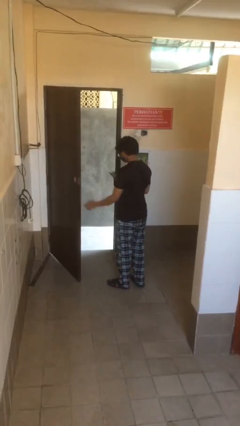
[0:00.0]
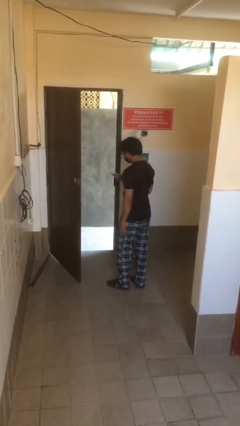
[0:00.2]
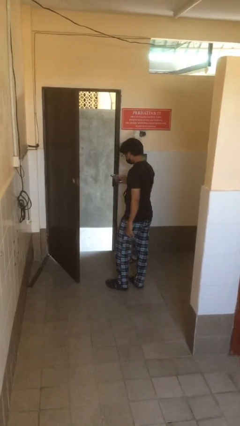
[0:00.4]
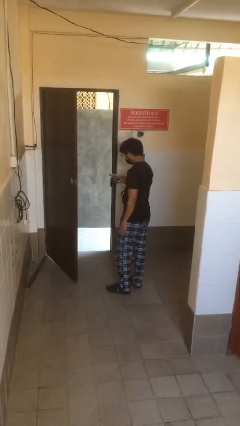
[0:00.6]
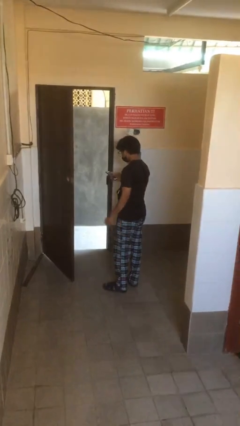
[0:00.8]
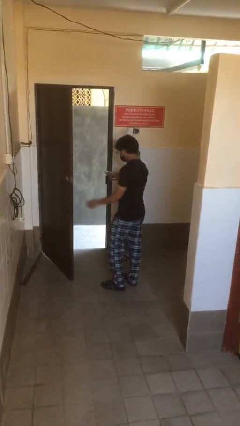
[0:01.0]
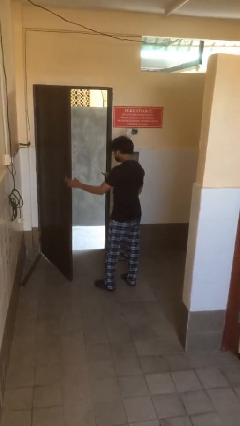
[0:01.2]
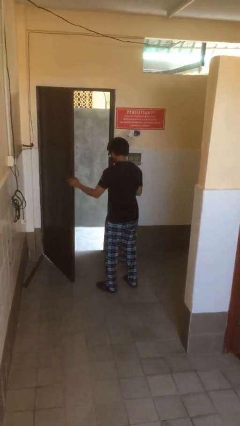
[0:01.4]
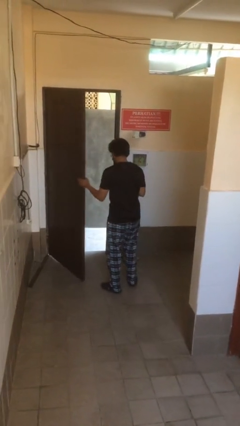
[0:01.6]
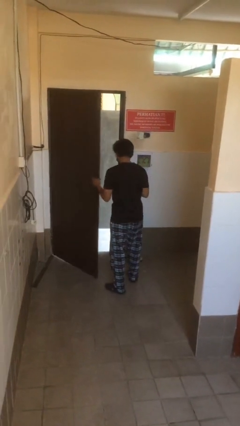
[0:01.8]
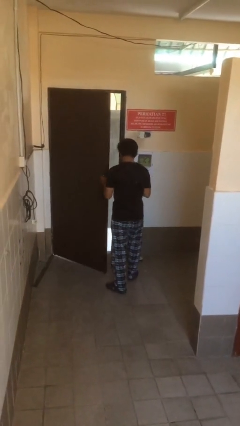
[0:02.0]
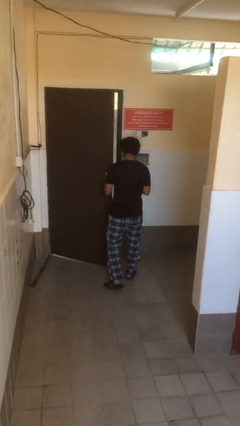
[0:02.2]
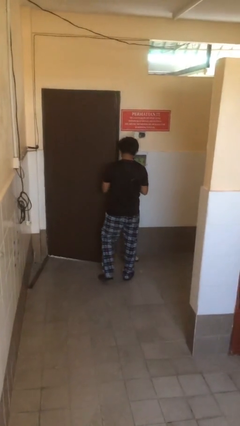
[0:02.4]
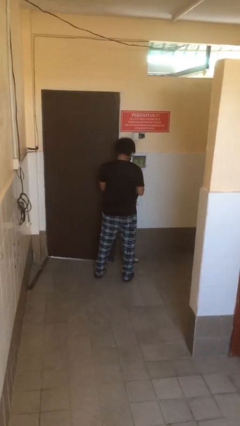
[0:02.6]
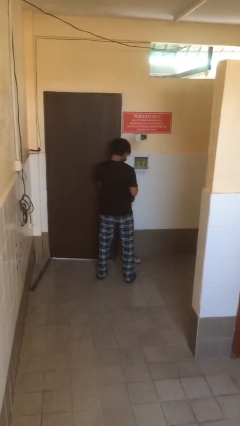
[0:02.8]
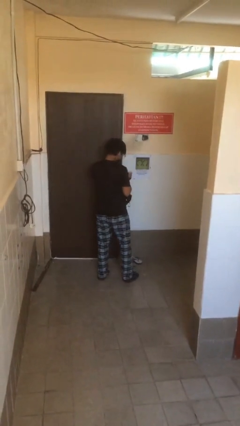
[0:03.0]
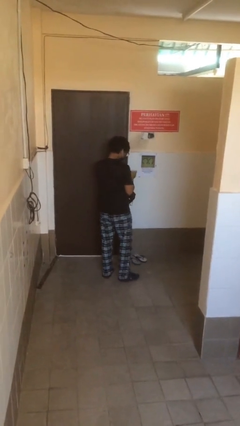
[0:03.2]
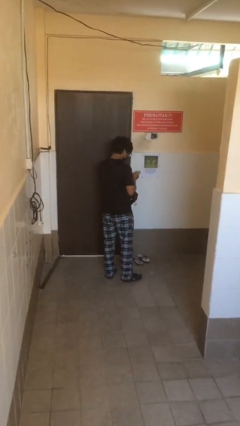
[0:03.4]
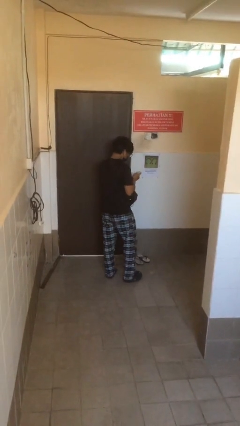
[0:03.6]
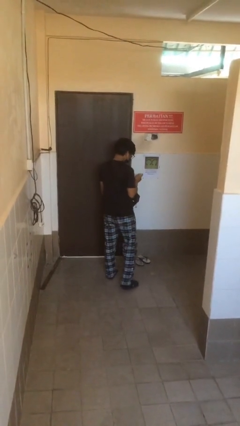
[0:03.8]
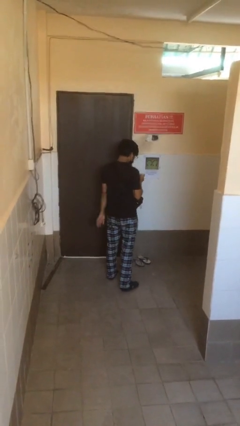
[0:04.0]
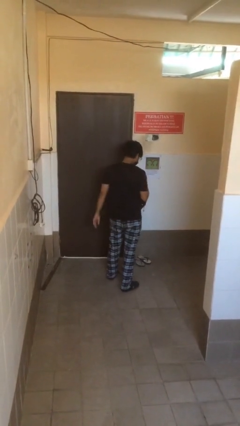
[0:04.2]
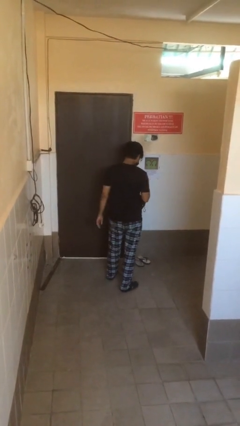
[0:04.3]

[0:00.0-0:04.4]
person closes facility door

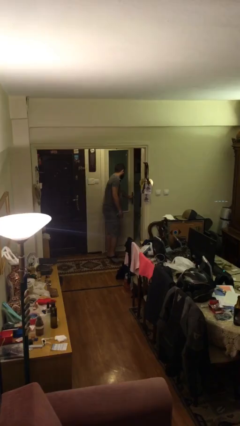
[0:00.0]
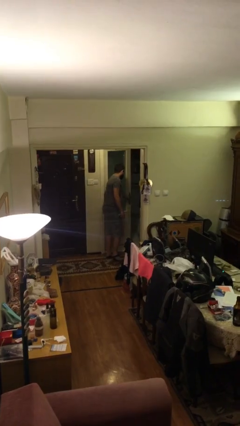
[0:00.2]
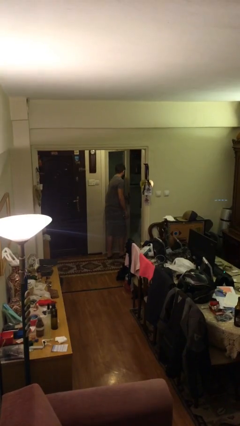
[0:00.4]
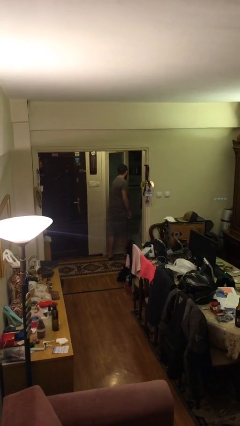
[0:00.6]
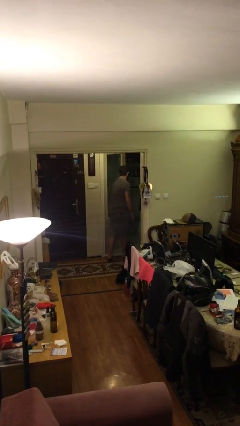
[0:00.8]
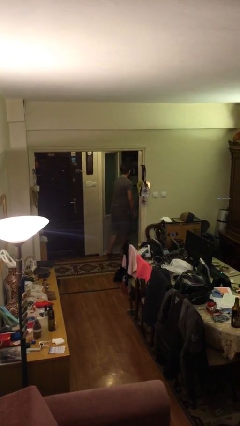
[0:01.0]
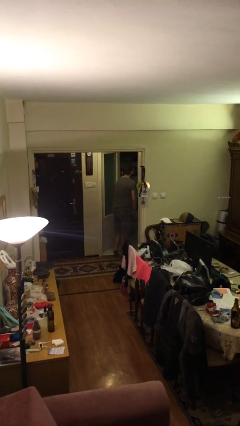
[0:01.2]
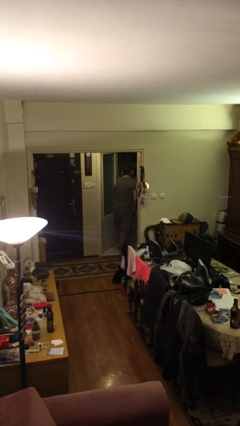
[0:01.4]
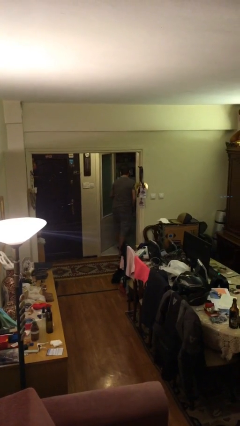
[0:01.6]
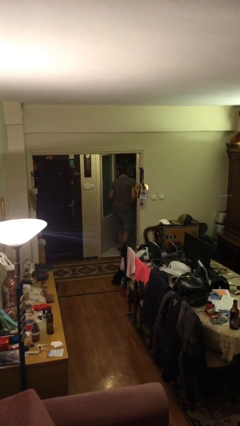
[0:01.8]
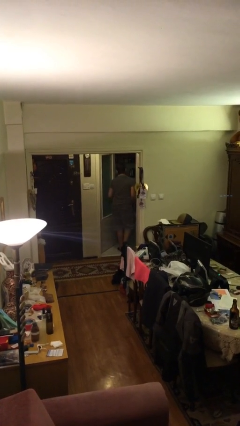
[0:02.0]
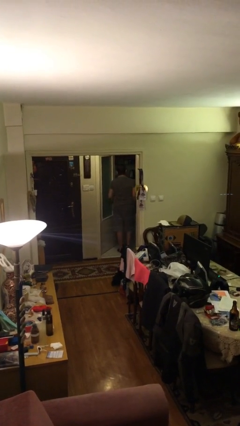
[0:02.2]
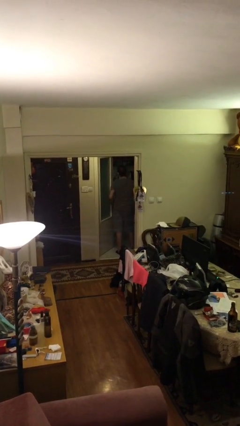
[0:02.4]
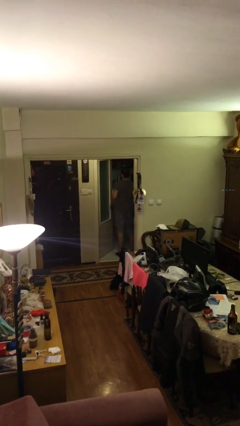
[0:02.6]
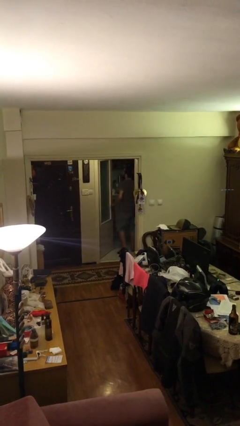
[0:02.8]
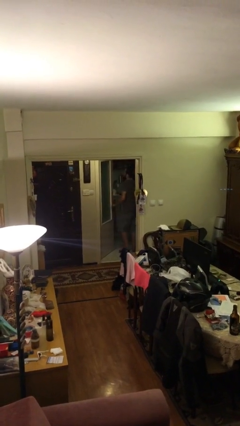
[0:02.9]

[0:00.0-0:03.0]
person exits scene through structure

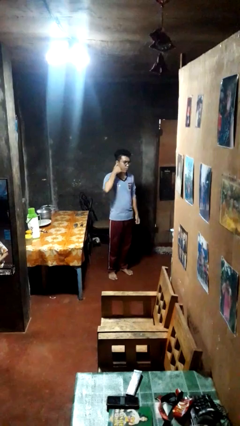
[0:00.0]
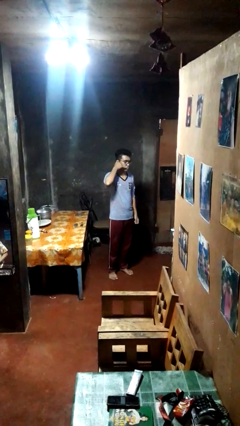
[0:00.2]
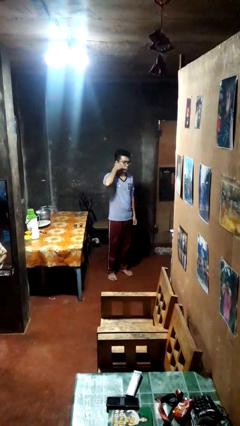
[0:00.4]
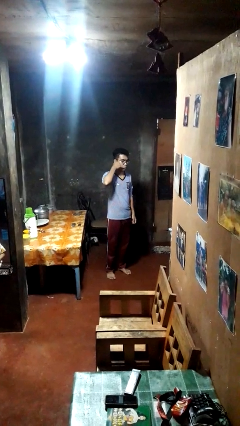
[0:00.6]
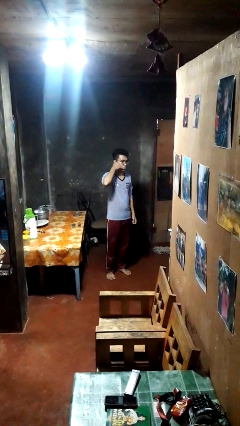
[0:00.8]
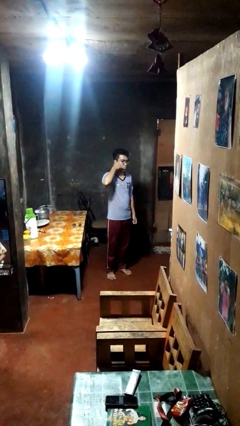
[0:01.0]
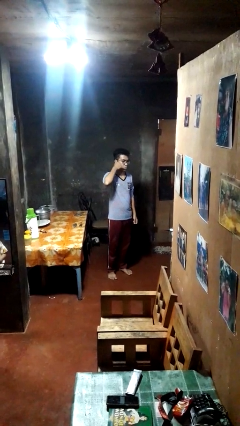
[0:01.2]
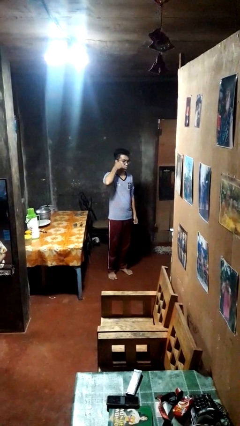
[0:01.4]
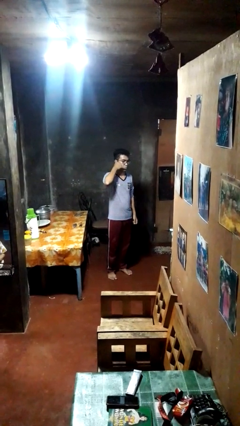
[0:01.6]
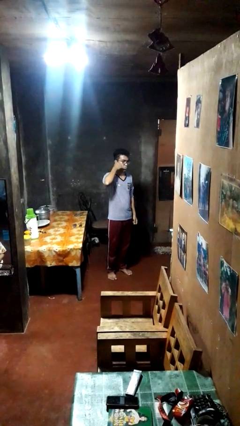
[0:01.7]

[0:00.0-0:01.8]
person gestures call me

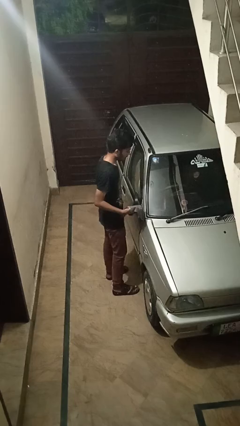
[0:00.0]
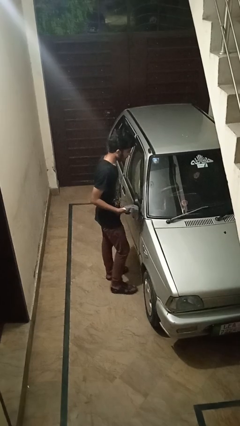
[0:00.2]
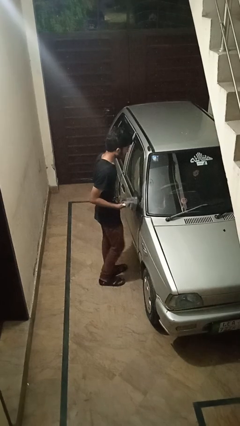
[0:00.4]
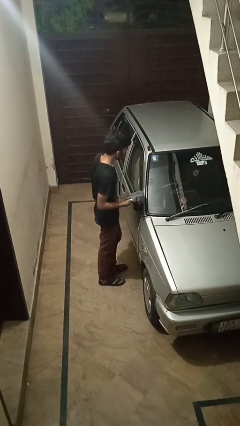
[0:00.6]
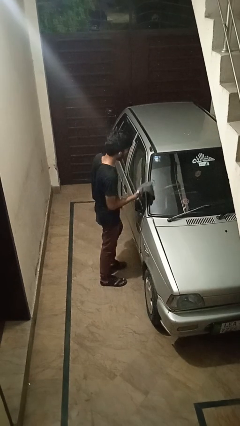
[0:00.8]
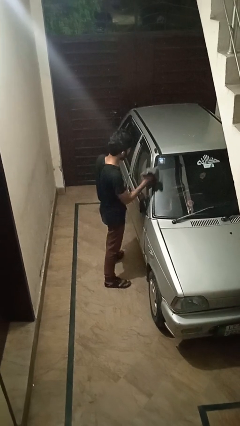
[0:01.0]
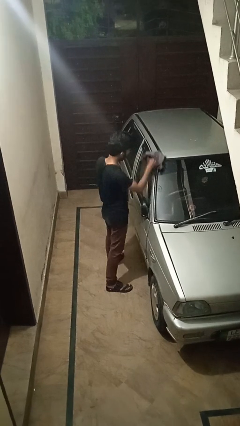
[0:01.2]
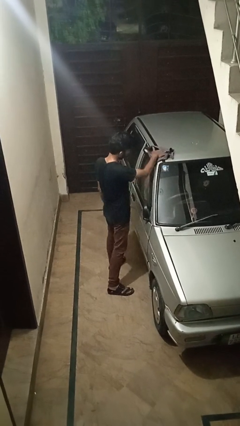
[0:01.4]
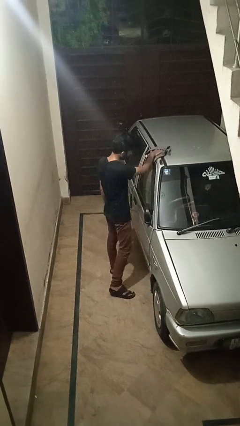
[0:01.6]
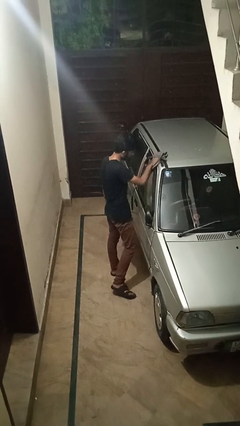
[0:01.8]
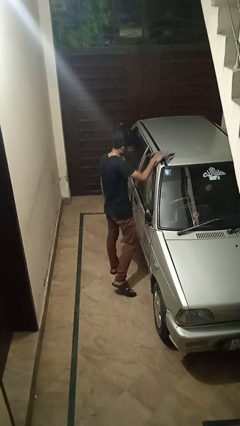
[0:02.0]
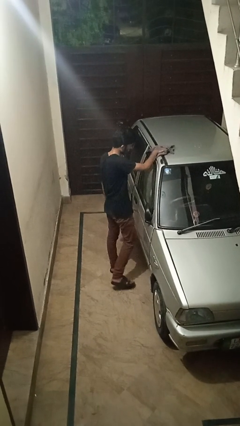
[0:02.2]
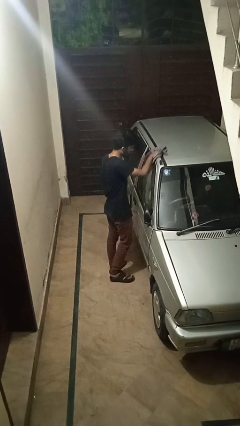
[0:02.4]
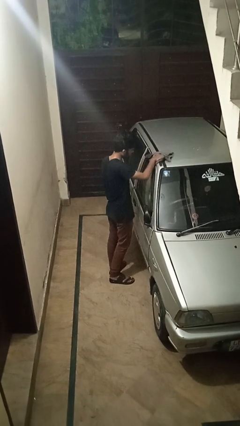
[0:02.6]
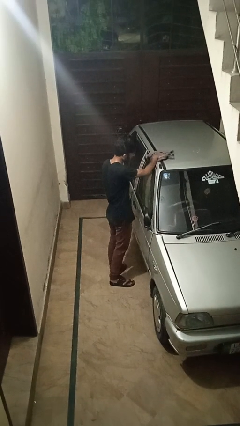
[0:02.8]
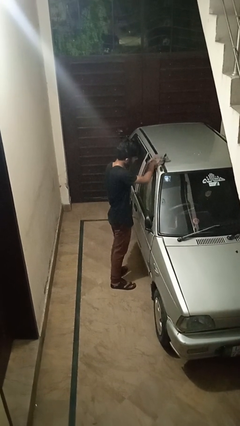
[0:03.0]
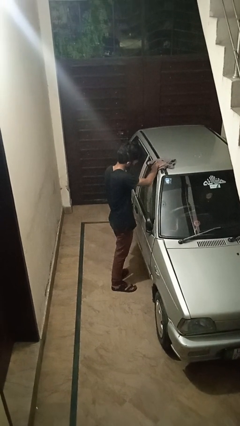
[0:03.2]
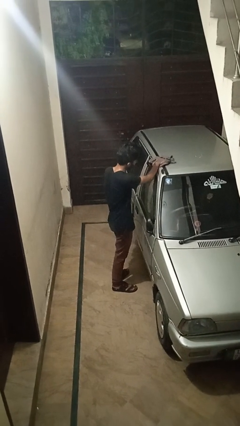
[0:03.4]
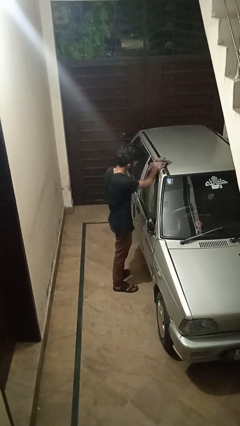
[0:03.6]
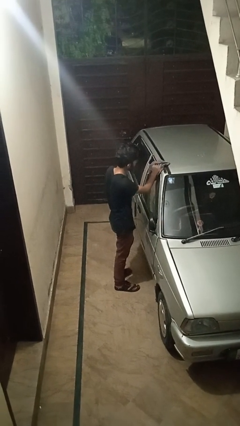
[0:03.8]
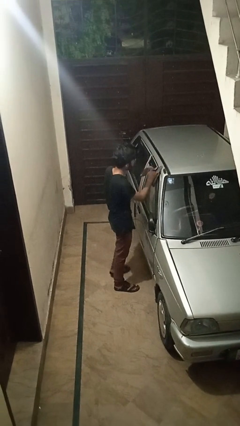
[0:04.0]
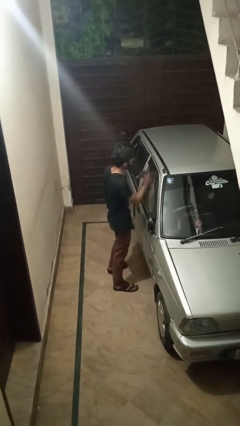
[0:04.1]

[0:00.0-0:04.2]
person polishes car with rag

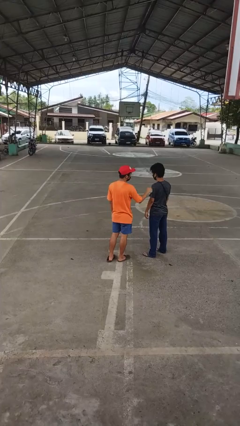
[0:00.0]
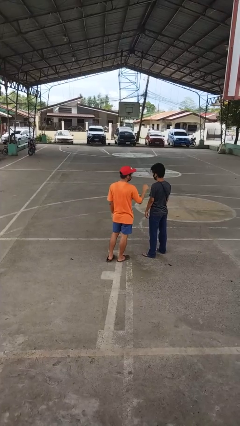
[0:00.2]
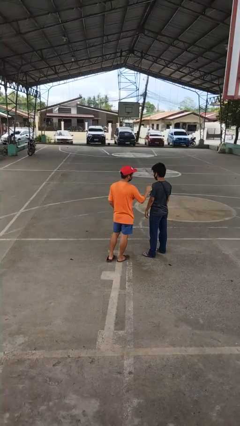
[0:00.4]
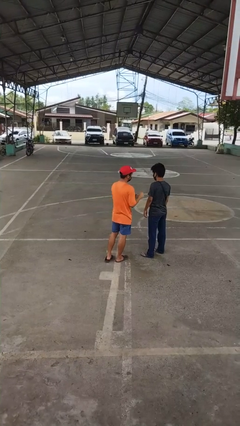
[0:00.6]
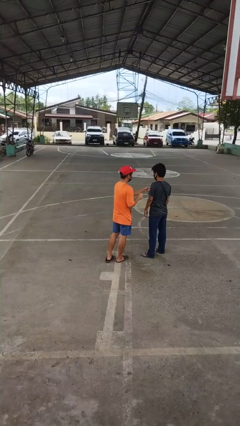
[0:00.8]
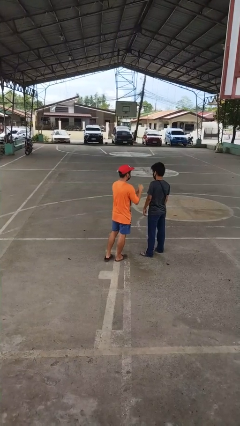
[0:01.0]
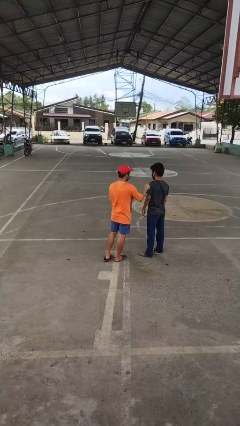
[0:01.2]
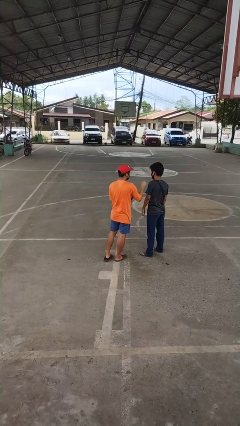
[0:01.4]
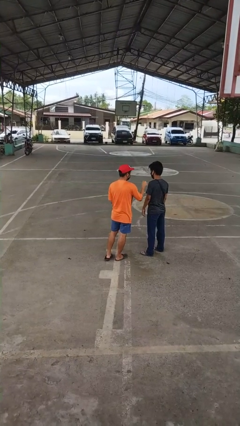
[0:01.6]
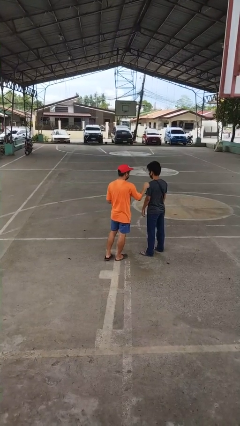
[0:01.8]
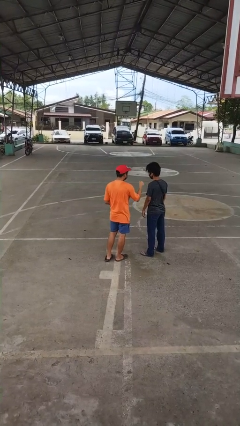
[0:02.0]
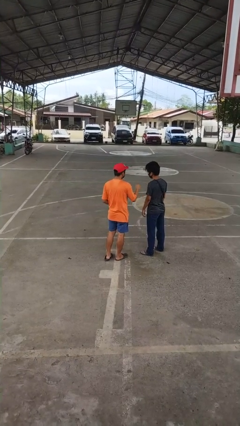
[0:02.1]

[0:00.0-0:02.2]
person pounds shoulders of person

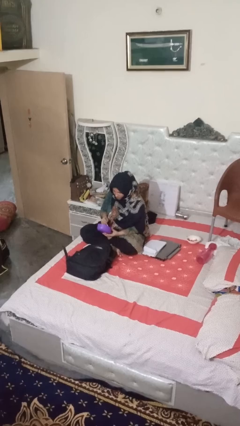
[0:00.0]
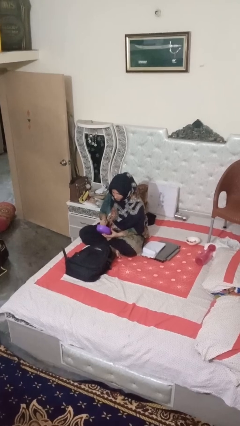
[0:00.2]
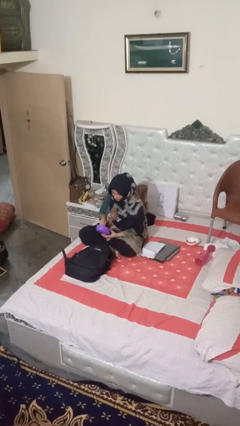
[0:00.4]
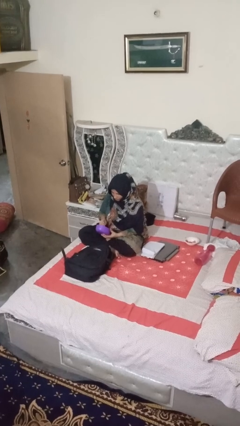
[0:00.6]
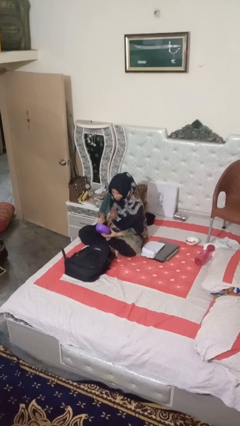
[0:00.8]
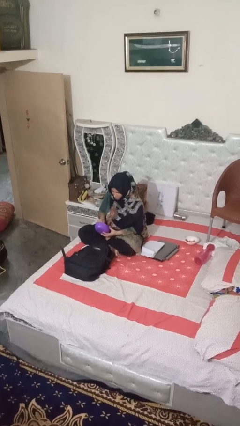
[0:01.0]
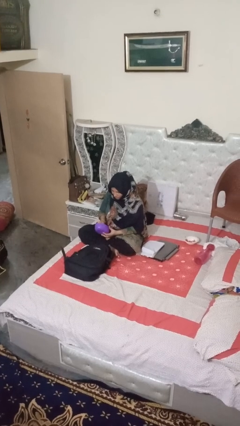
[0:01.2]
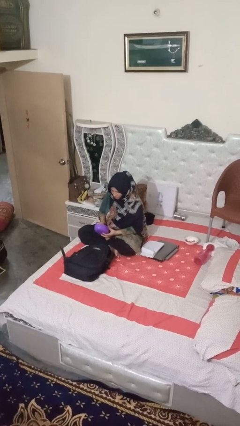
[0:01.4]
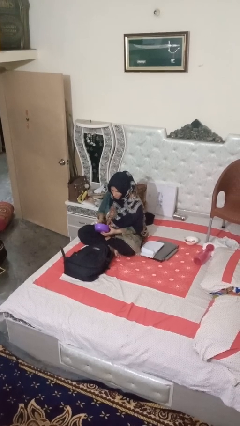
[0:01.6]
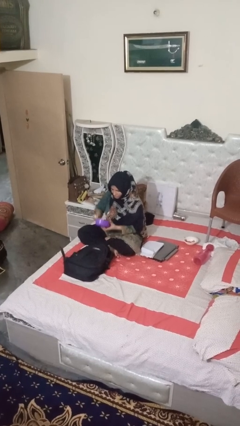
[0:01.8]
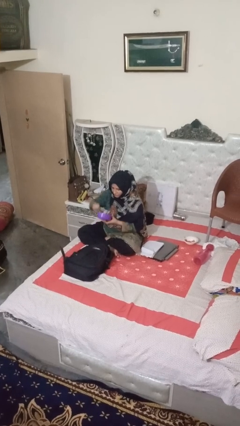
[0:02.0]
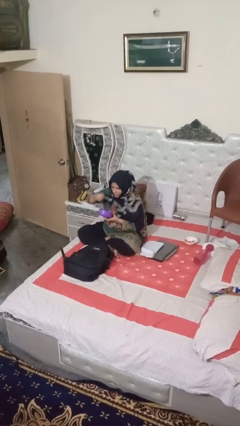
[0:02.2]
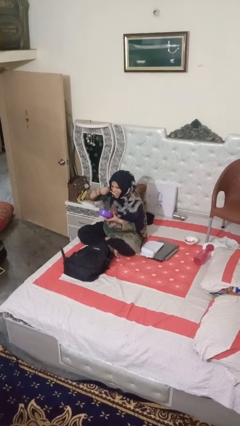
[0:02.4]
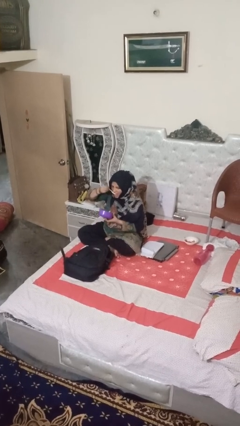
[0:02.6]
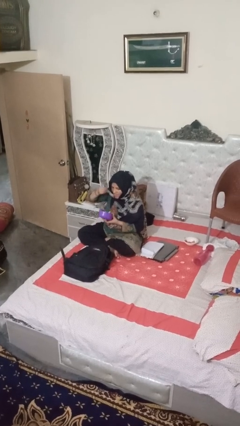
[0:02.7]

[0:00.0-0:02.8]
person eats snack from bag
